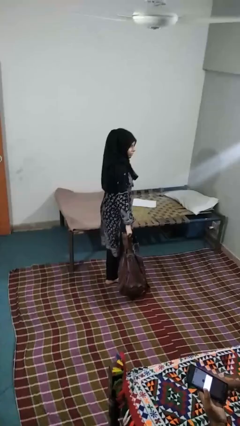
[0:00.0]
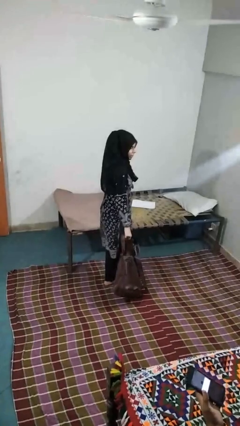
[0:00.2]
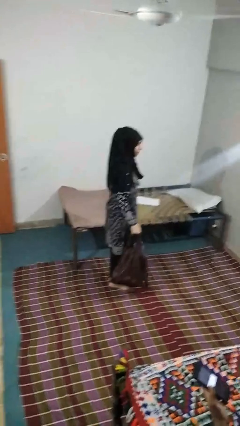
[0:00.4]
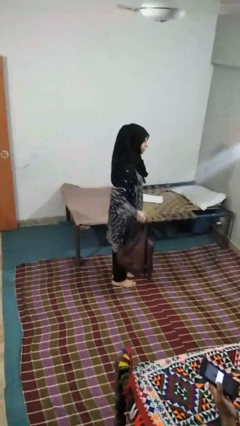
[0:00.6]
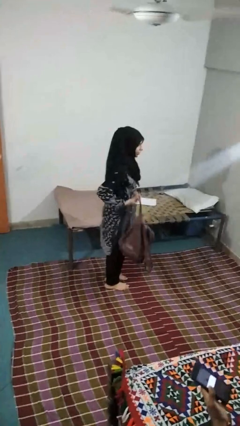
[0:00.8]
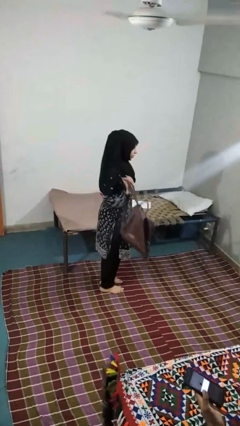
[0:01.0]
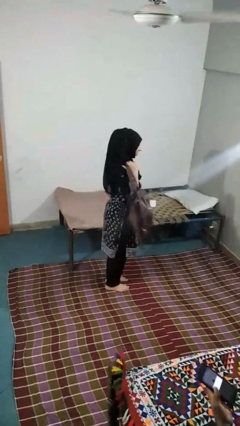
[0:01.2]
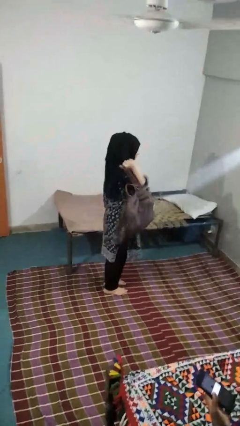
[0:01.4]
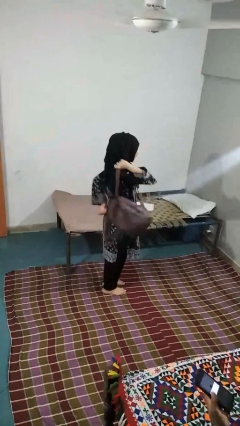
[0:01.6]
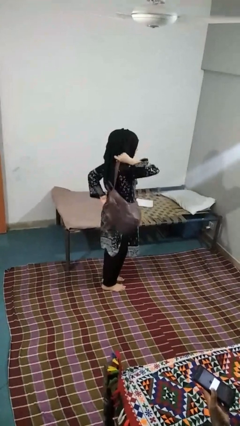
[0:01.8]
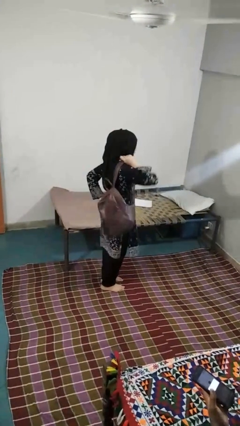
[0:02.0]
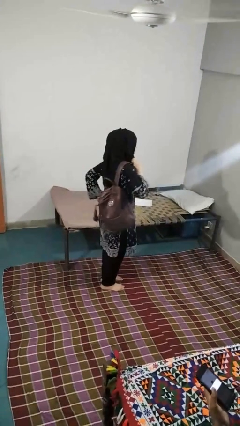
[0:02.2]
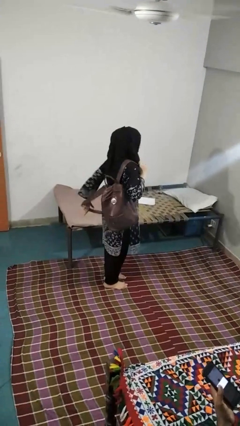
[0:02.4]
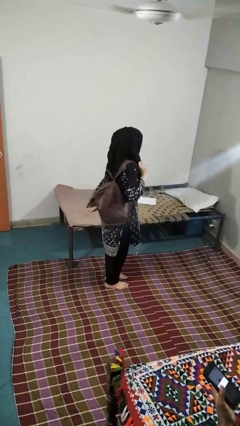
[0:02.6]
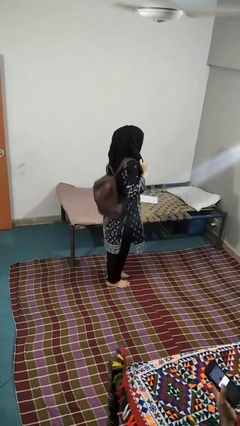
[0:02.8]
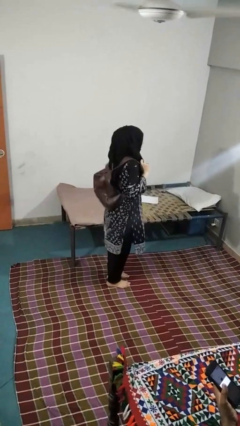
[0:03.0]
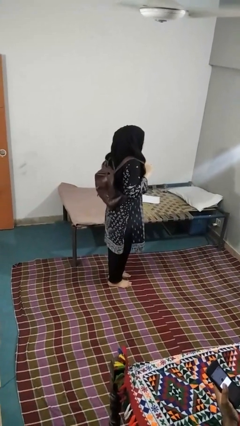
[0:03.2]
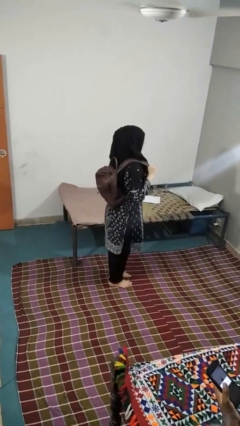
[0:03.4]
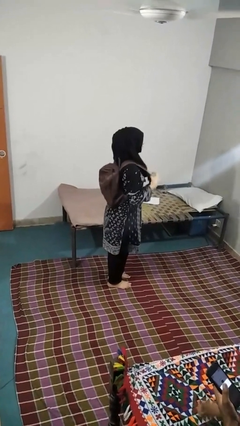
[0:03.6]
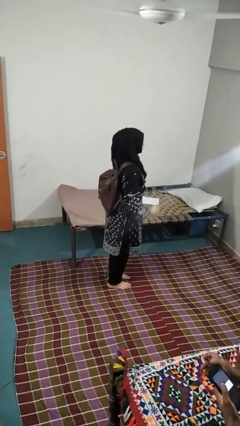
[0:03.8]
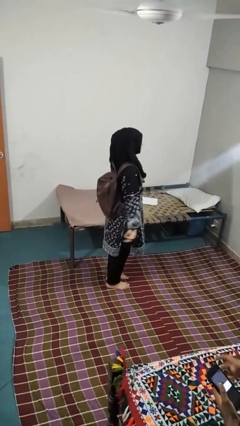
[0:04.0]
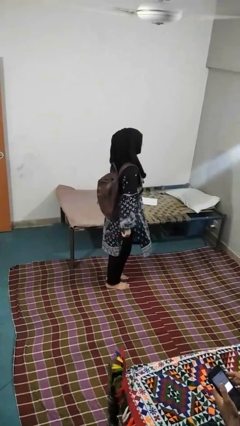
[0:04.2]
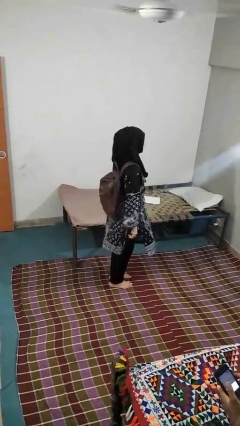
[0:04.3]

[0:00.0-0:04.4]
person puts on backpack

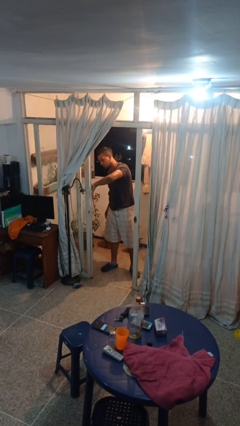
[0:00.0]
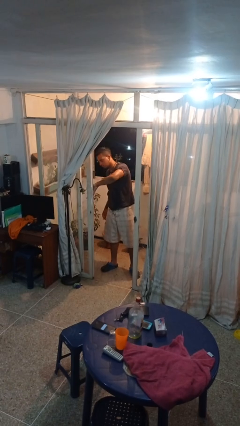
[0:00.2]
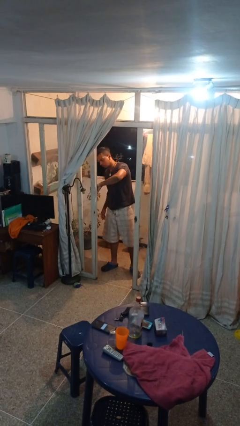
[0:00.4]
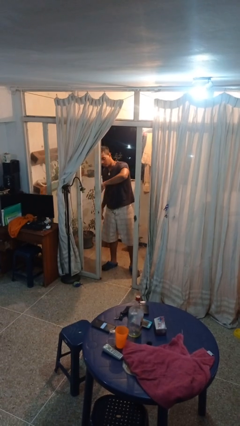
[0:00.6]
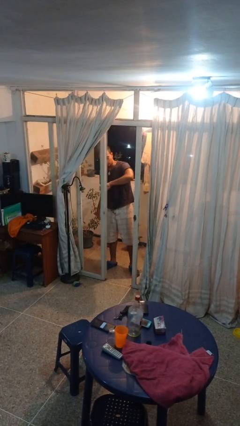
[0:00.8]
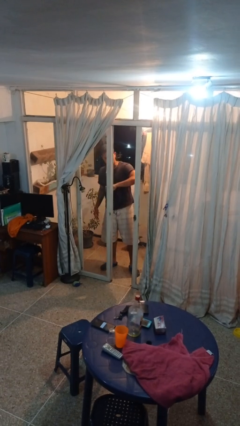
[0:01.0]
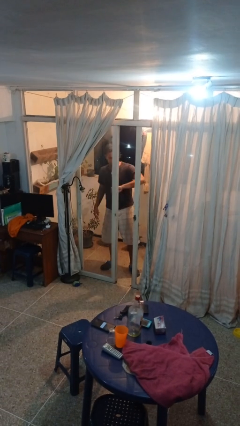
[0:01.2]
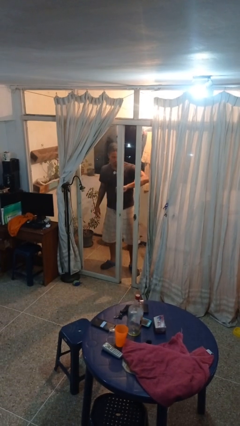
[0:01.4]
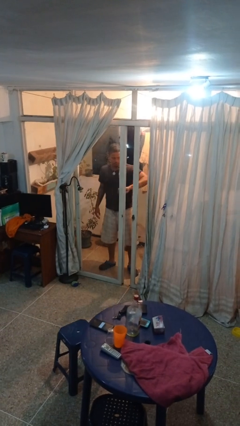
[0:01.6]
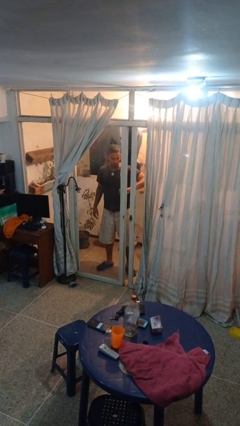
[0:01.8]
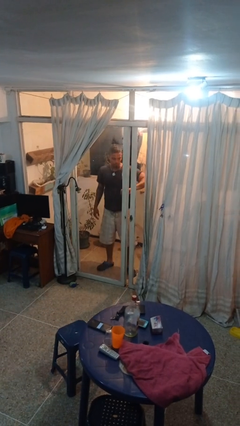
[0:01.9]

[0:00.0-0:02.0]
person closes sliding door

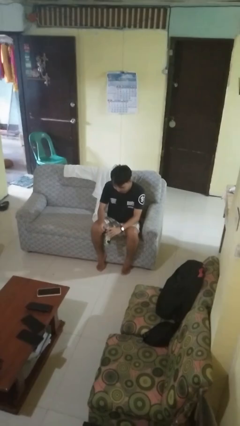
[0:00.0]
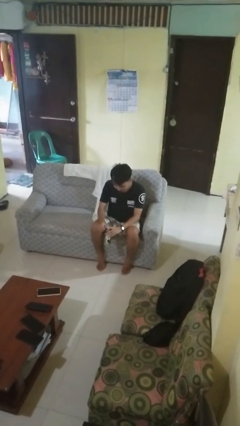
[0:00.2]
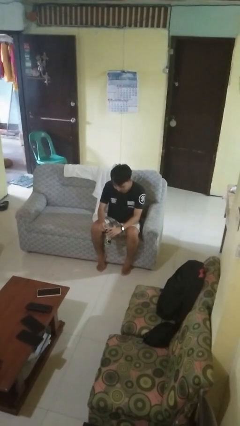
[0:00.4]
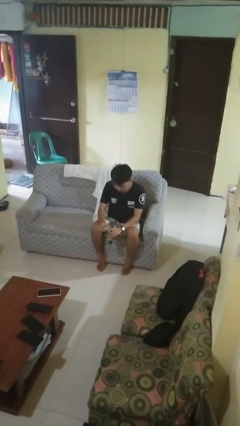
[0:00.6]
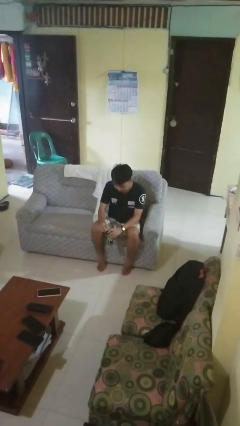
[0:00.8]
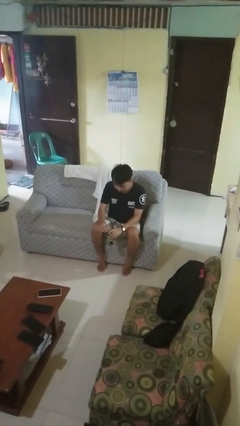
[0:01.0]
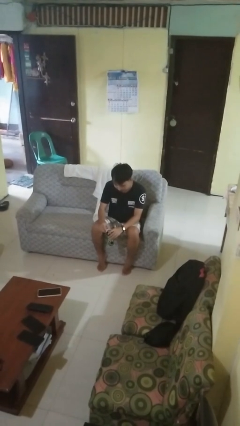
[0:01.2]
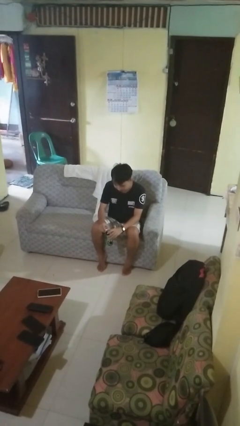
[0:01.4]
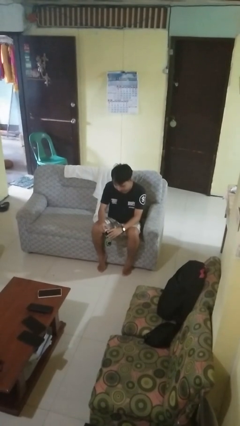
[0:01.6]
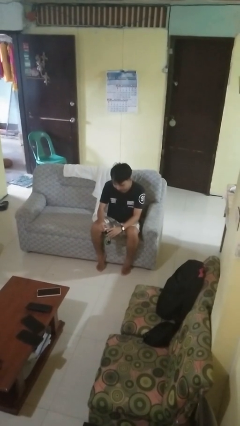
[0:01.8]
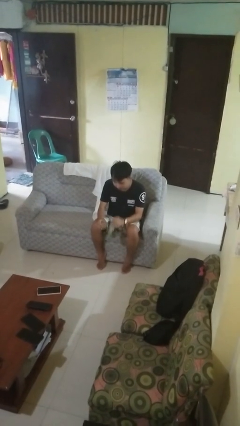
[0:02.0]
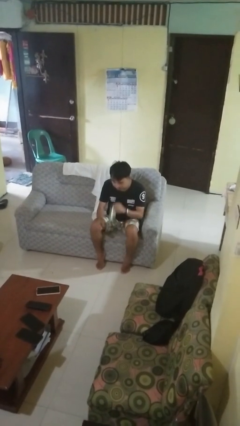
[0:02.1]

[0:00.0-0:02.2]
person opens beverage can

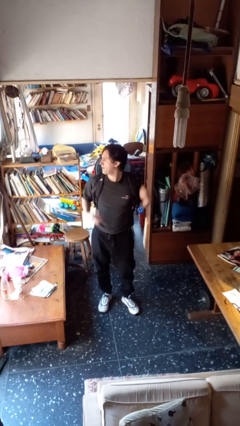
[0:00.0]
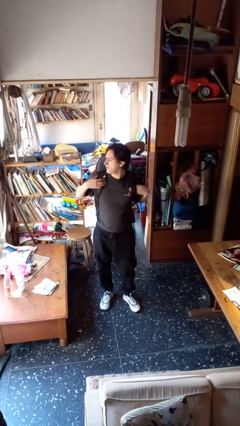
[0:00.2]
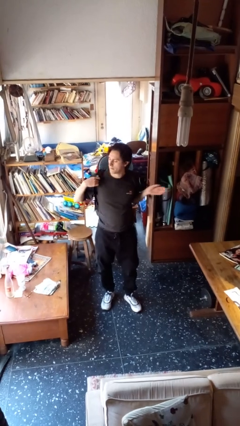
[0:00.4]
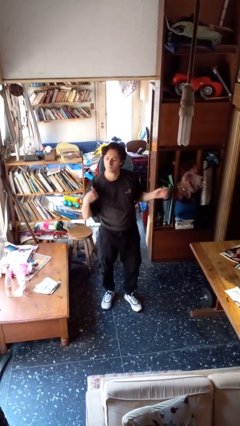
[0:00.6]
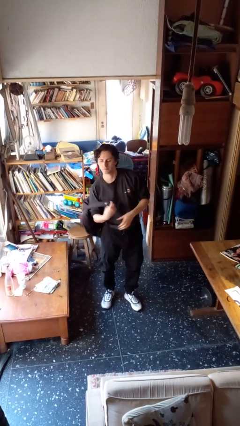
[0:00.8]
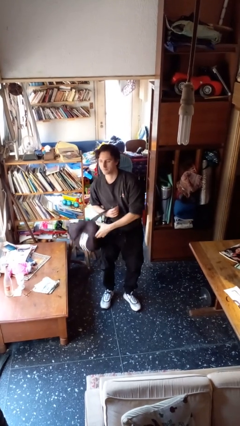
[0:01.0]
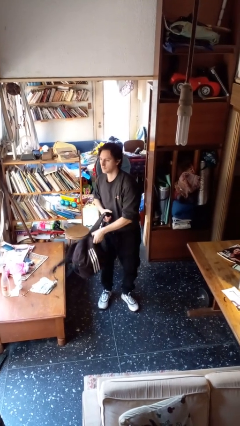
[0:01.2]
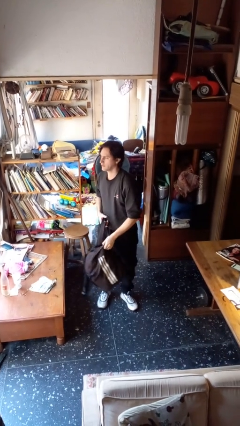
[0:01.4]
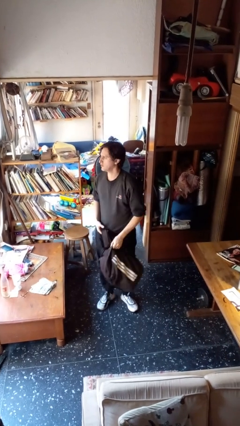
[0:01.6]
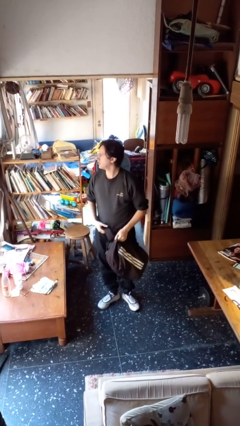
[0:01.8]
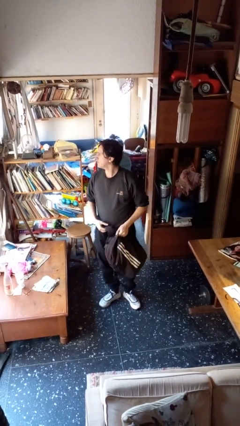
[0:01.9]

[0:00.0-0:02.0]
person takes off backpack

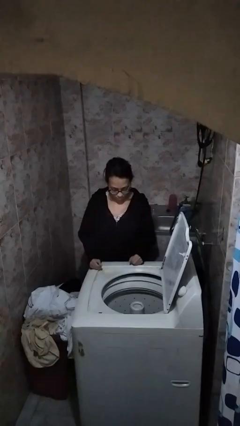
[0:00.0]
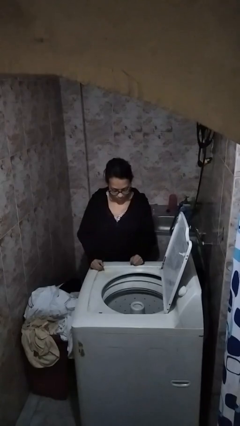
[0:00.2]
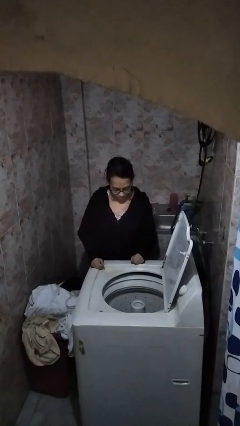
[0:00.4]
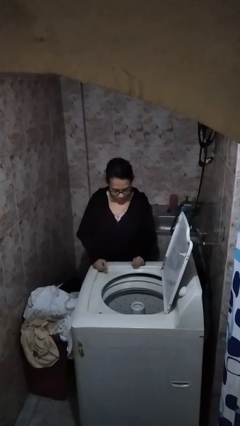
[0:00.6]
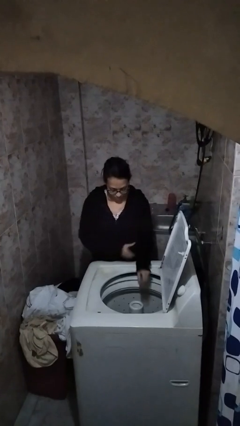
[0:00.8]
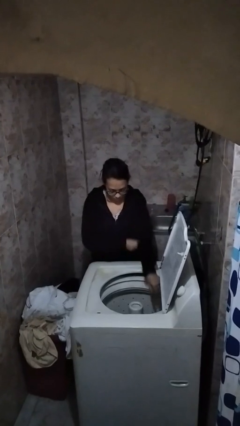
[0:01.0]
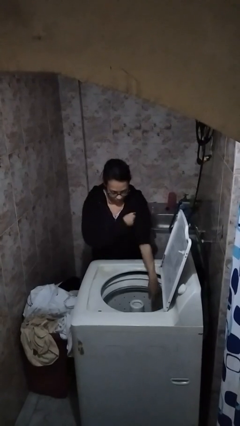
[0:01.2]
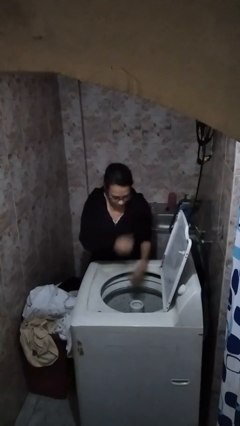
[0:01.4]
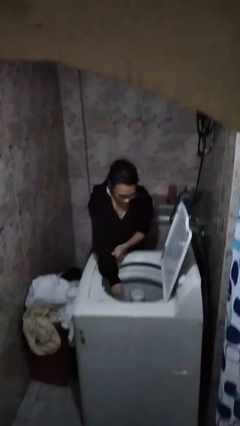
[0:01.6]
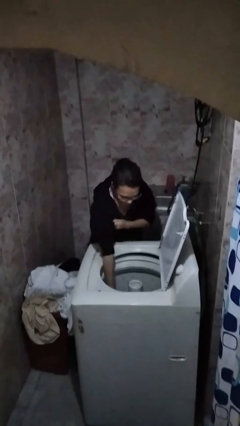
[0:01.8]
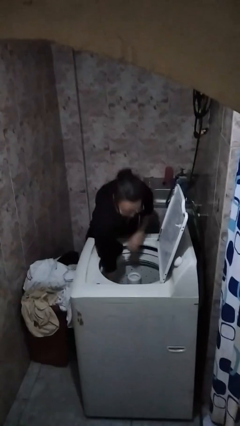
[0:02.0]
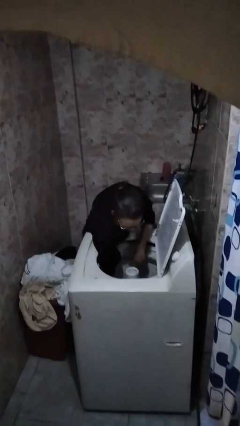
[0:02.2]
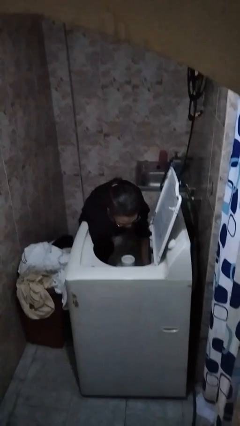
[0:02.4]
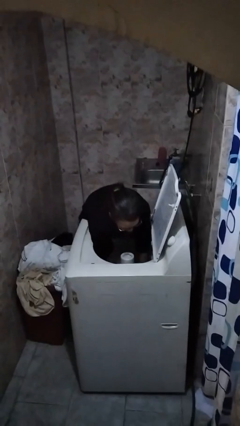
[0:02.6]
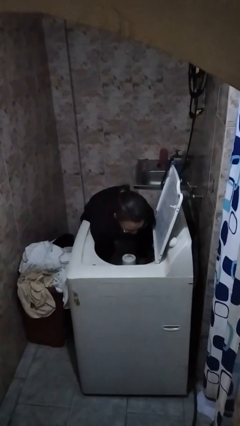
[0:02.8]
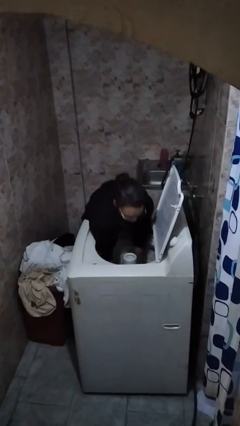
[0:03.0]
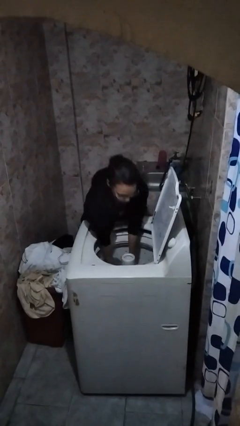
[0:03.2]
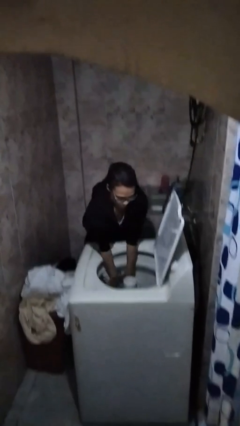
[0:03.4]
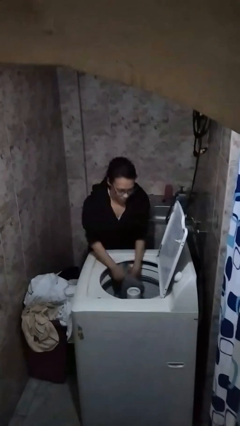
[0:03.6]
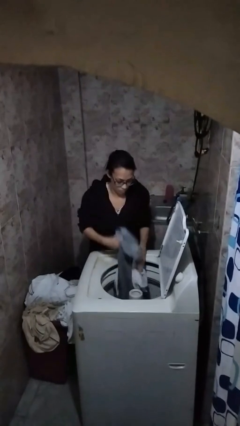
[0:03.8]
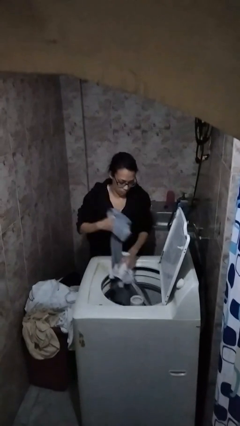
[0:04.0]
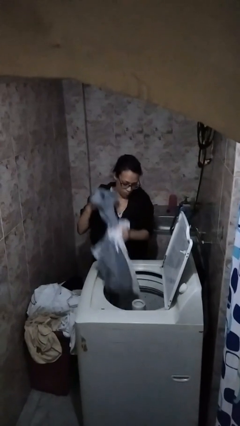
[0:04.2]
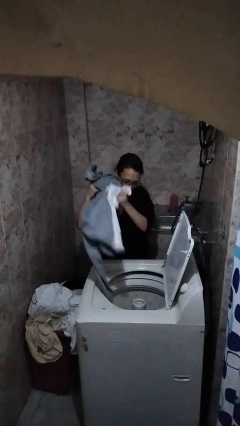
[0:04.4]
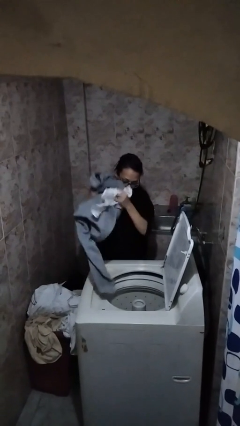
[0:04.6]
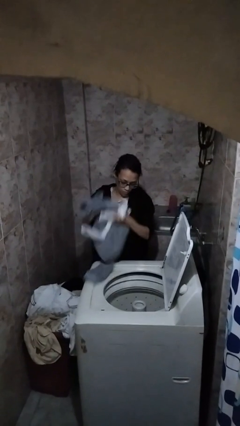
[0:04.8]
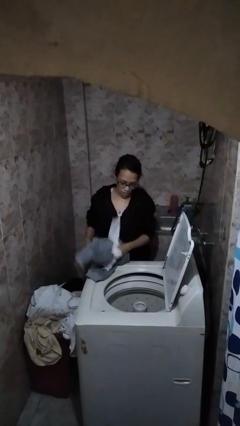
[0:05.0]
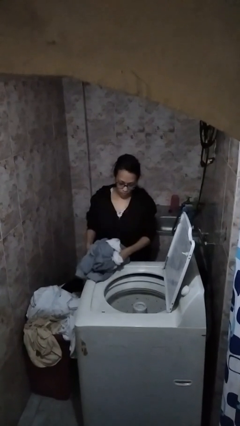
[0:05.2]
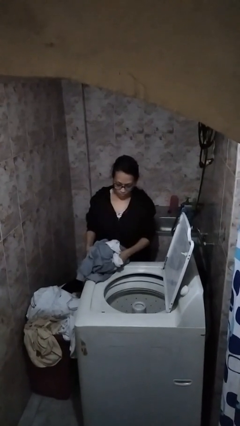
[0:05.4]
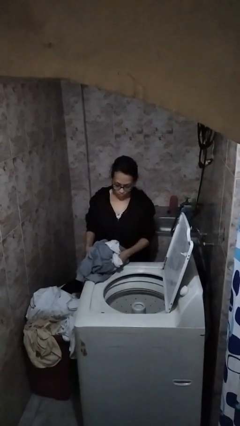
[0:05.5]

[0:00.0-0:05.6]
person unloads dryer

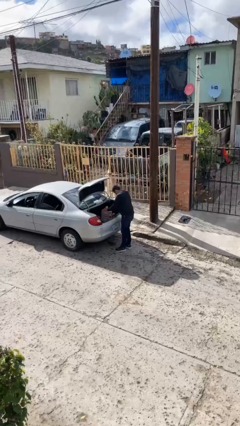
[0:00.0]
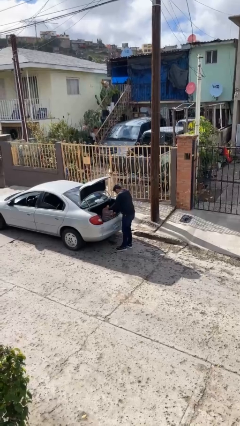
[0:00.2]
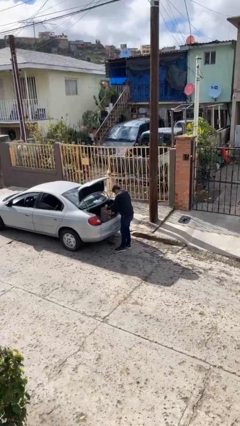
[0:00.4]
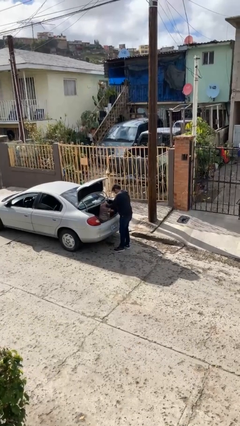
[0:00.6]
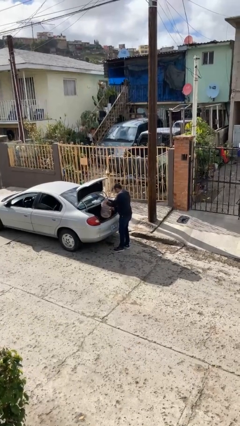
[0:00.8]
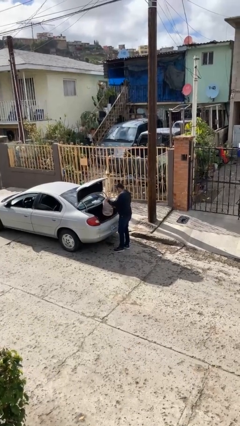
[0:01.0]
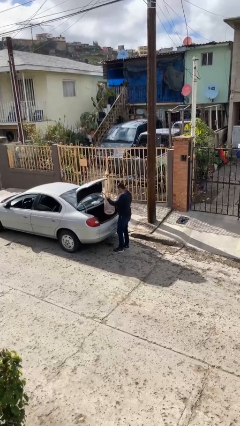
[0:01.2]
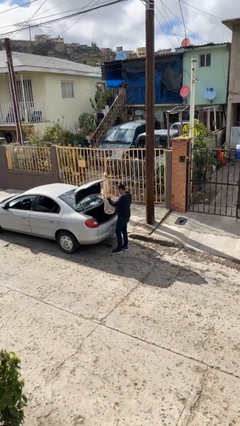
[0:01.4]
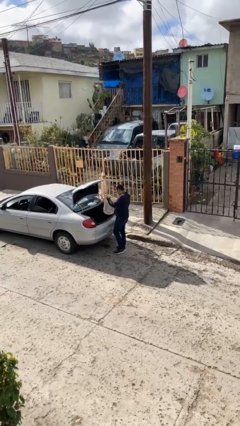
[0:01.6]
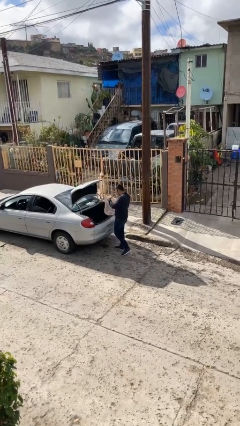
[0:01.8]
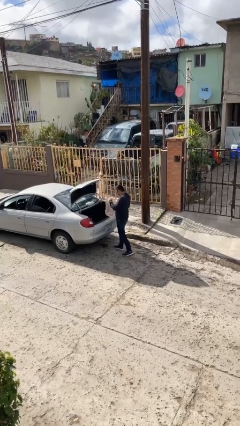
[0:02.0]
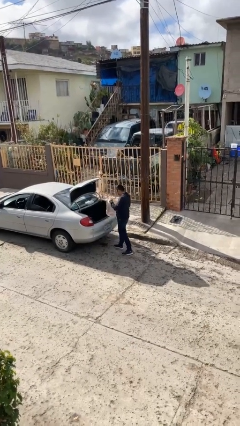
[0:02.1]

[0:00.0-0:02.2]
person unloads car
